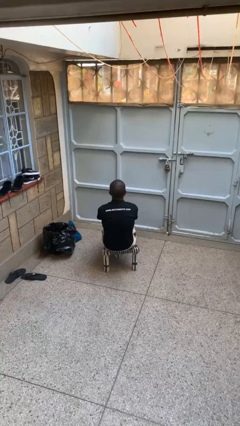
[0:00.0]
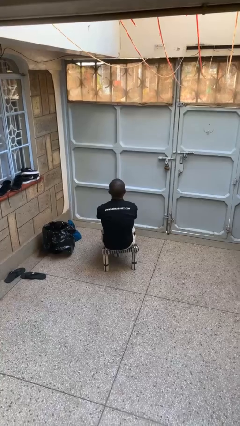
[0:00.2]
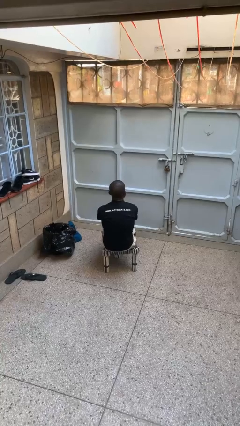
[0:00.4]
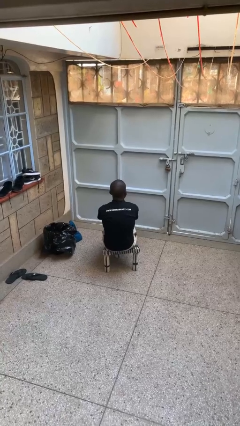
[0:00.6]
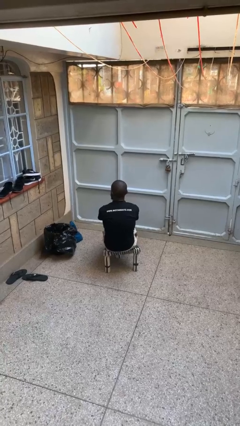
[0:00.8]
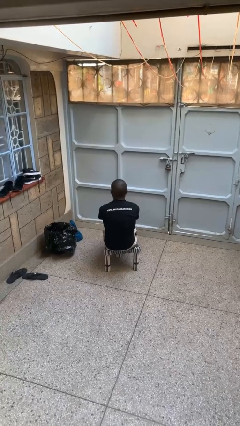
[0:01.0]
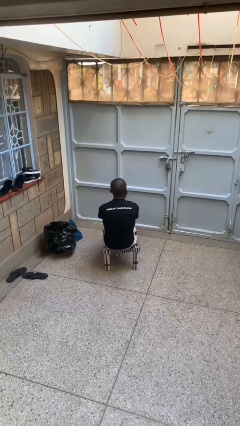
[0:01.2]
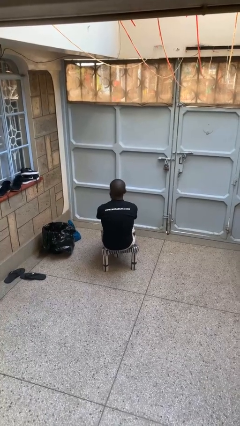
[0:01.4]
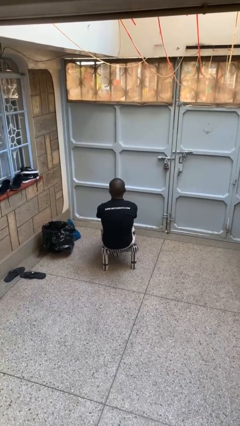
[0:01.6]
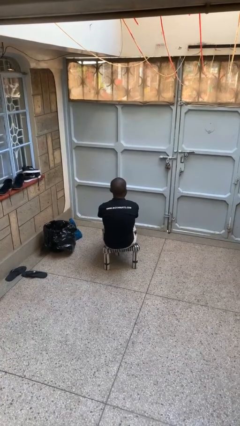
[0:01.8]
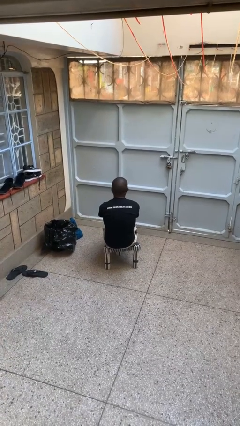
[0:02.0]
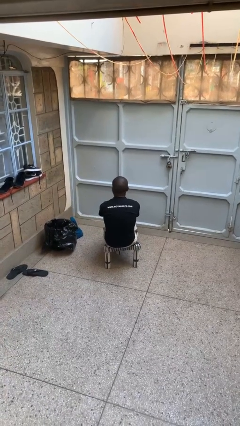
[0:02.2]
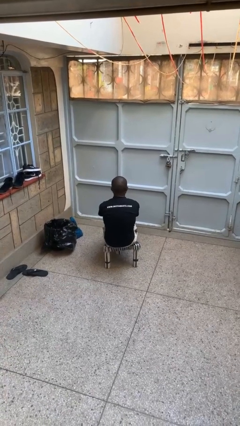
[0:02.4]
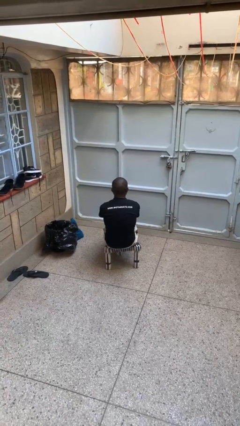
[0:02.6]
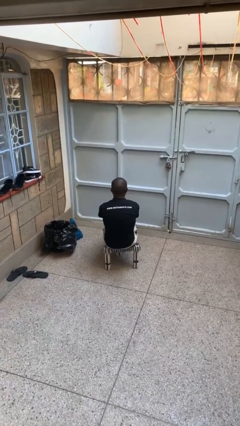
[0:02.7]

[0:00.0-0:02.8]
person shakes head

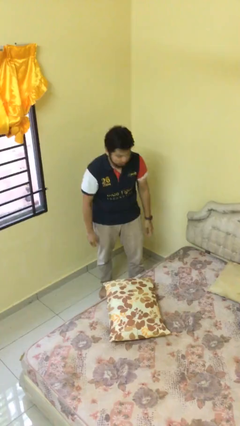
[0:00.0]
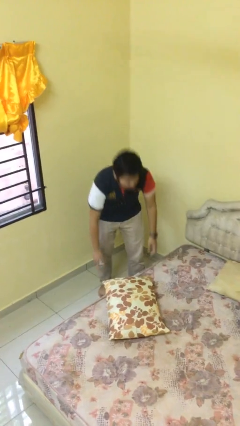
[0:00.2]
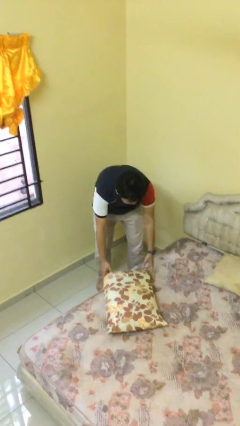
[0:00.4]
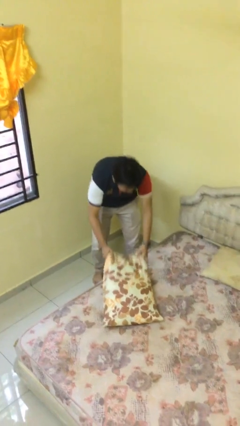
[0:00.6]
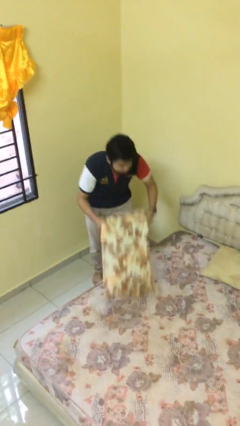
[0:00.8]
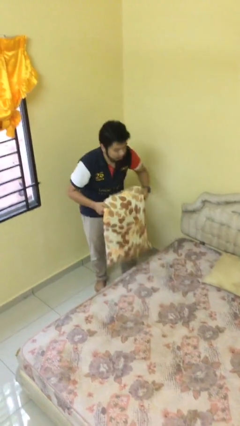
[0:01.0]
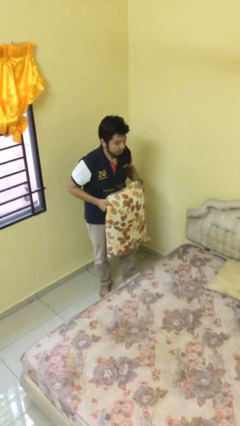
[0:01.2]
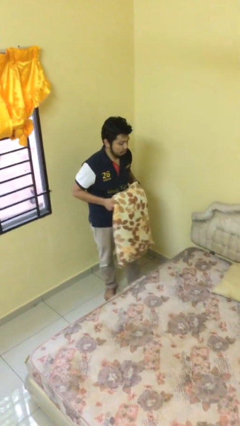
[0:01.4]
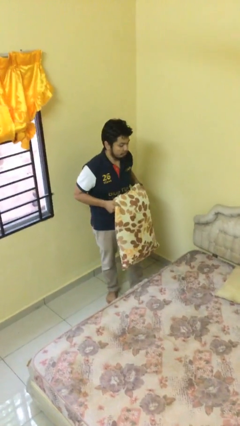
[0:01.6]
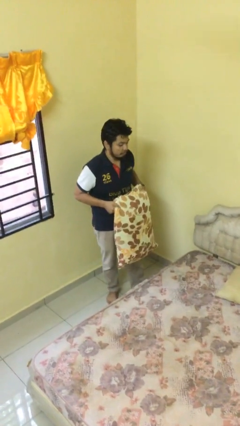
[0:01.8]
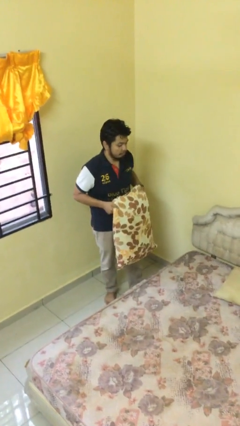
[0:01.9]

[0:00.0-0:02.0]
person picks up object from bed

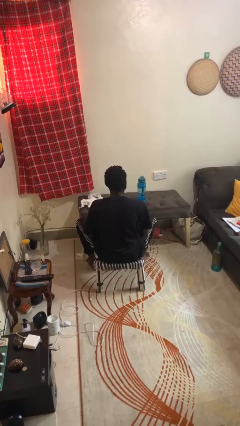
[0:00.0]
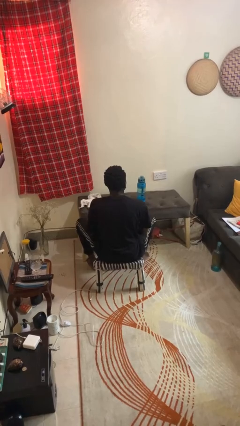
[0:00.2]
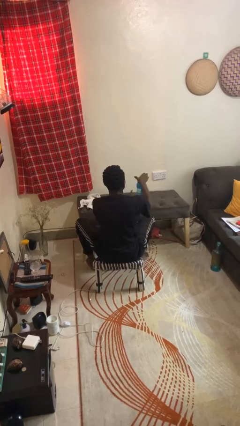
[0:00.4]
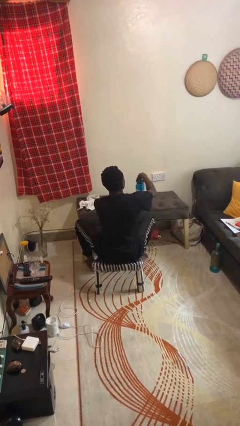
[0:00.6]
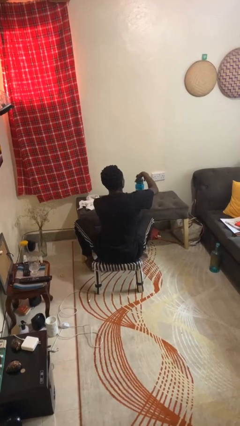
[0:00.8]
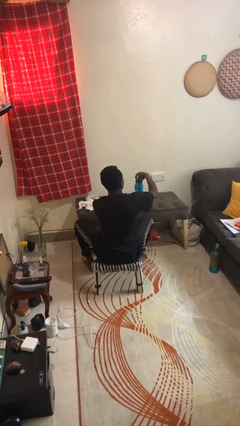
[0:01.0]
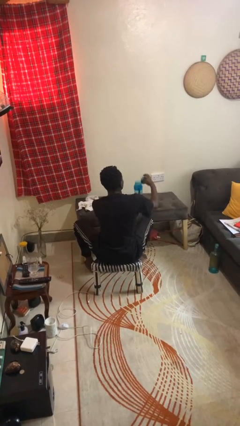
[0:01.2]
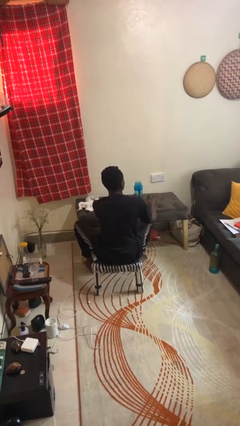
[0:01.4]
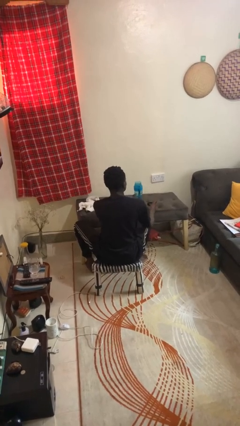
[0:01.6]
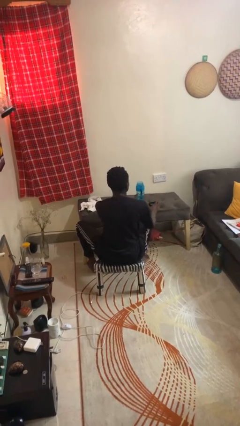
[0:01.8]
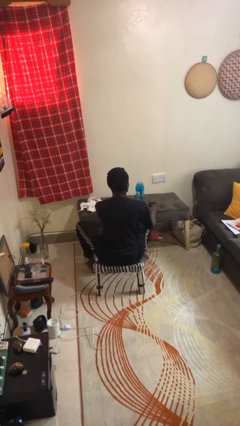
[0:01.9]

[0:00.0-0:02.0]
person opens jar

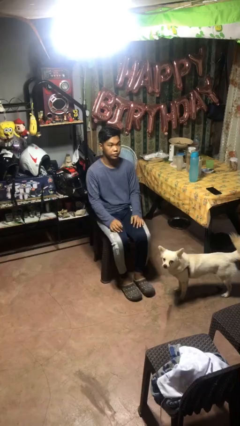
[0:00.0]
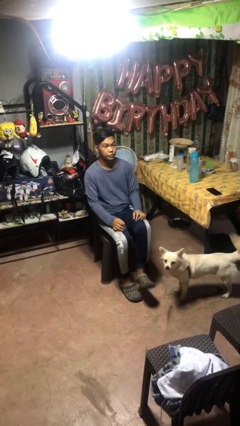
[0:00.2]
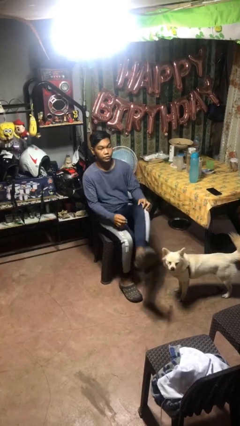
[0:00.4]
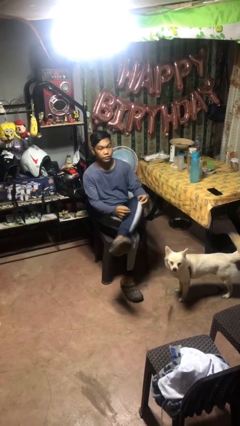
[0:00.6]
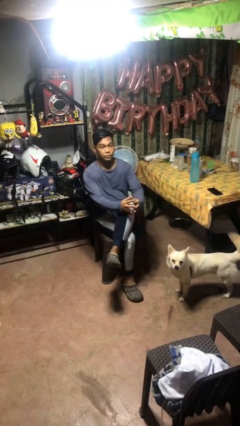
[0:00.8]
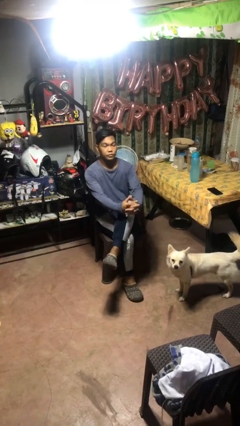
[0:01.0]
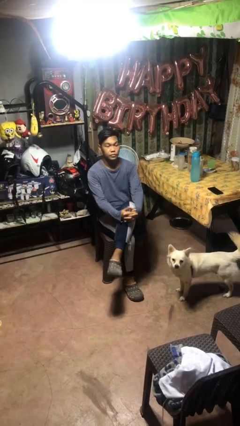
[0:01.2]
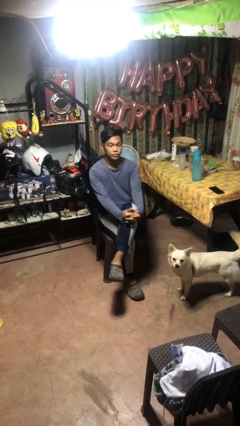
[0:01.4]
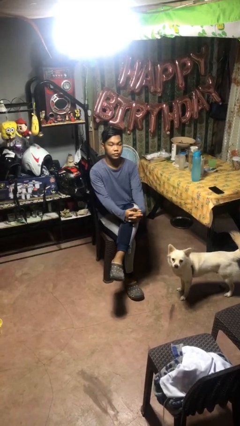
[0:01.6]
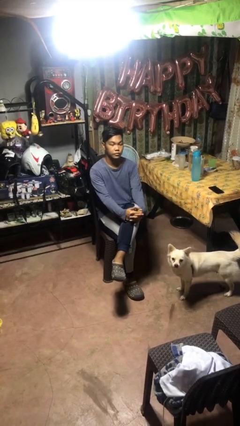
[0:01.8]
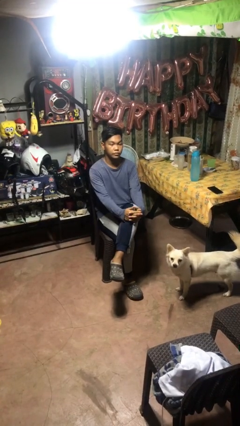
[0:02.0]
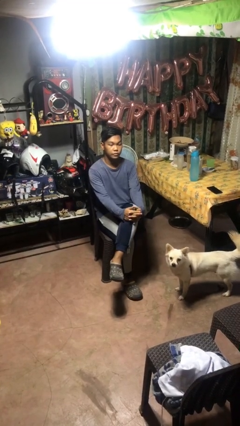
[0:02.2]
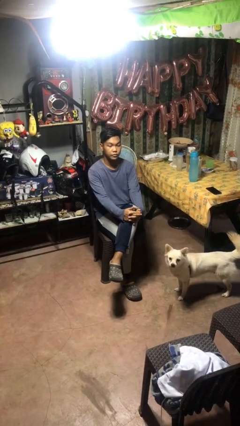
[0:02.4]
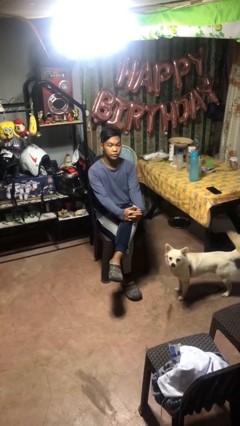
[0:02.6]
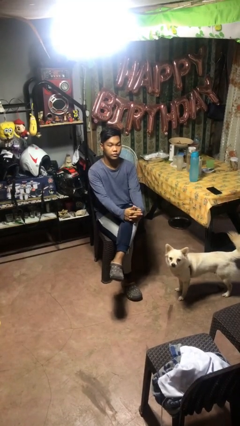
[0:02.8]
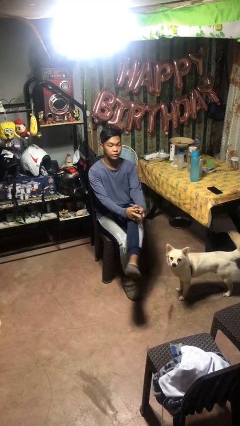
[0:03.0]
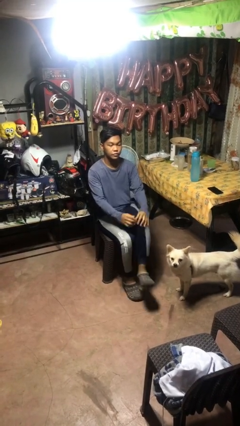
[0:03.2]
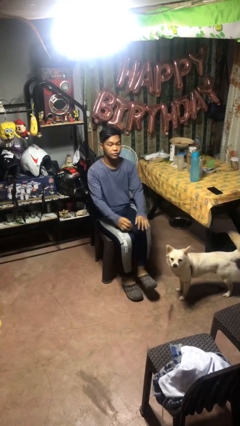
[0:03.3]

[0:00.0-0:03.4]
person crosses legs

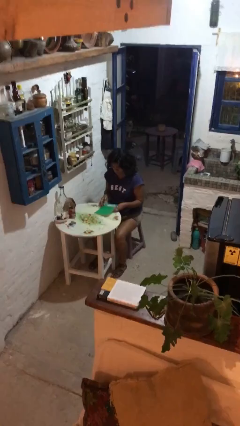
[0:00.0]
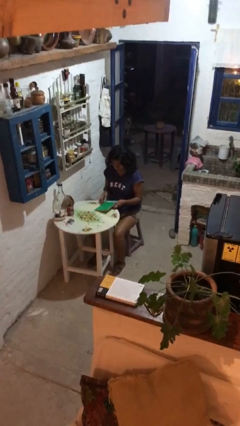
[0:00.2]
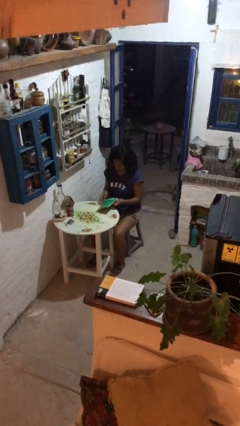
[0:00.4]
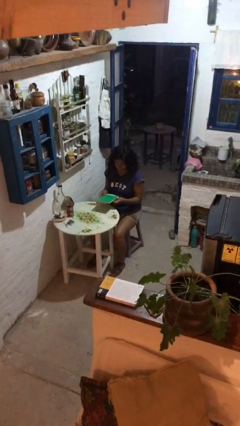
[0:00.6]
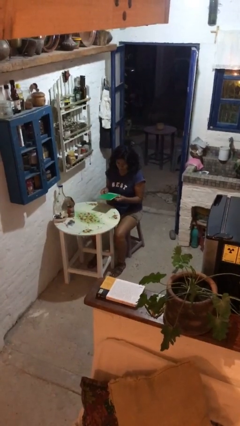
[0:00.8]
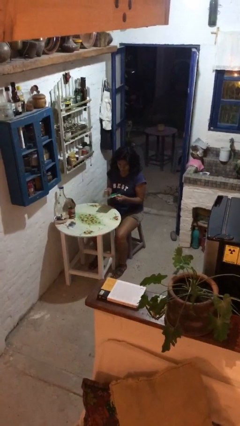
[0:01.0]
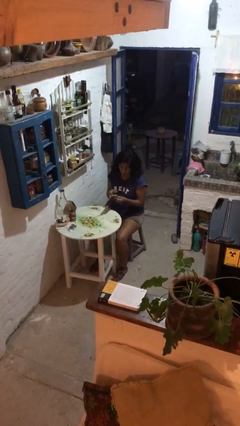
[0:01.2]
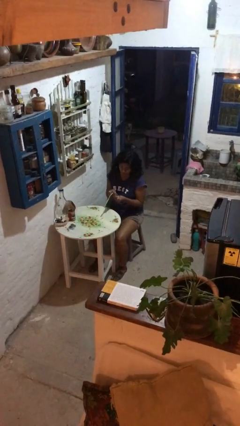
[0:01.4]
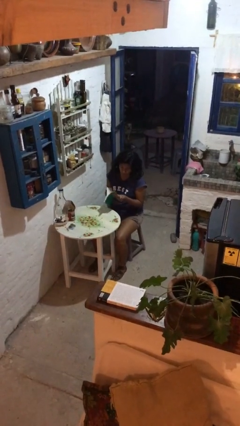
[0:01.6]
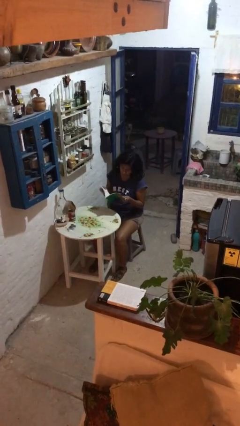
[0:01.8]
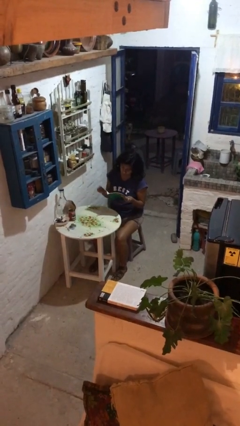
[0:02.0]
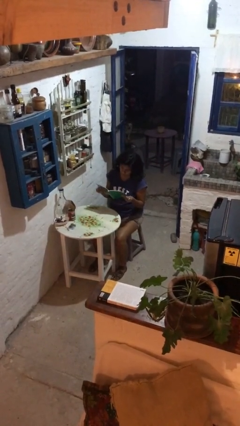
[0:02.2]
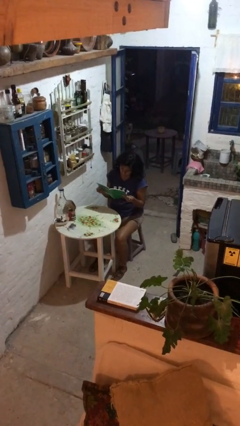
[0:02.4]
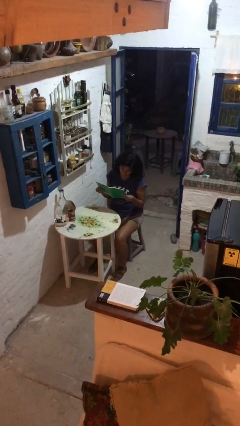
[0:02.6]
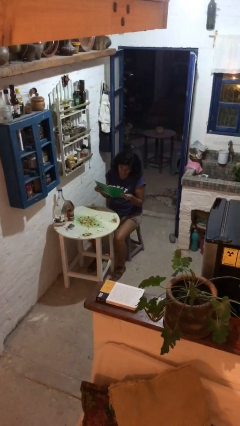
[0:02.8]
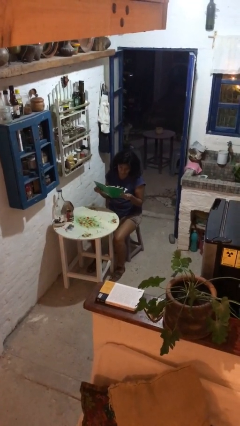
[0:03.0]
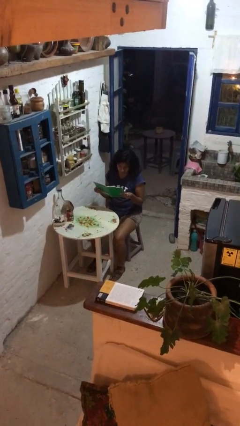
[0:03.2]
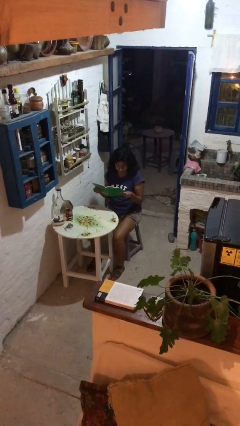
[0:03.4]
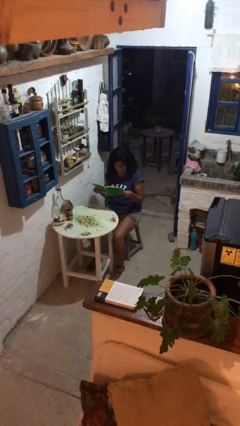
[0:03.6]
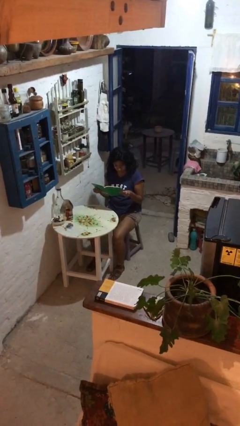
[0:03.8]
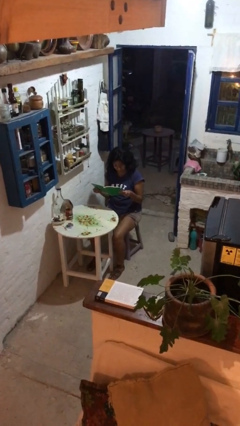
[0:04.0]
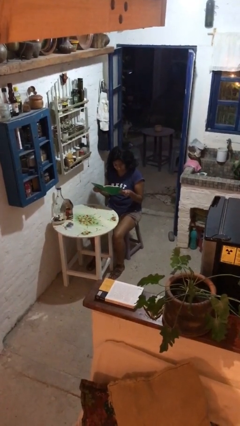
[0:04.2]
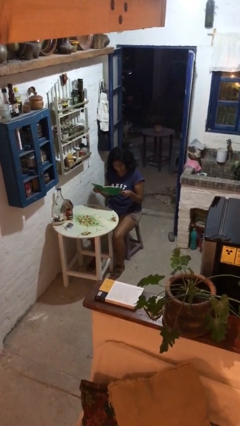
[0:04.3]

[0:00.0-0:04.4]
person reads document

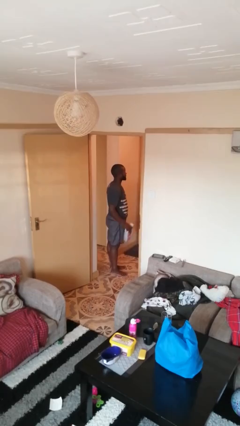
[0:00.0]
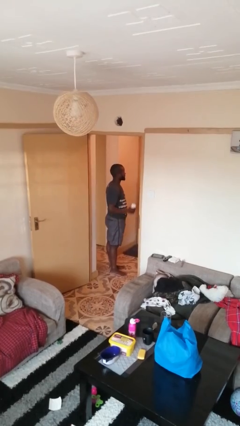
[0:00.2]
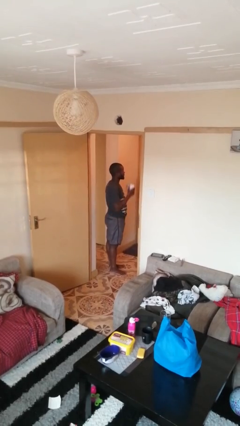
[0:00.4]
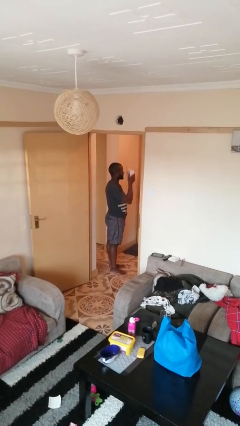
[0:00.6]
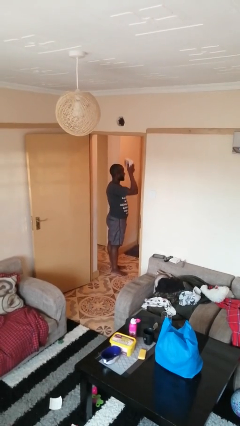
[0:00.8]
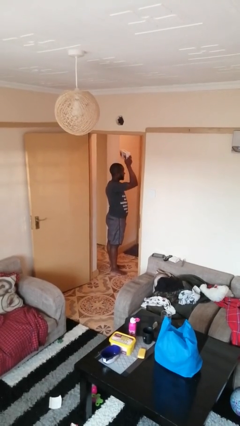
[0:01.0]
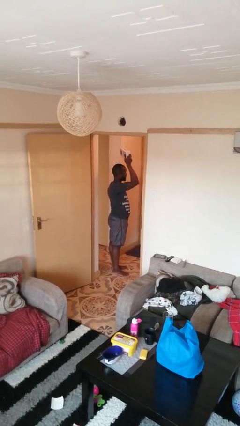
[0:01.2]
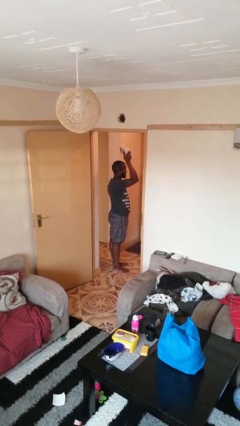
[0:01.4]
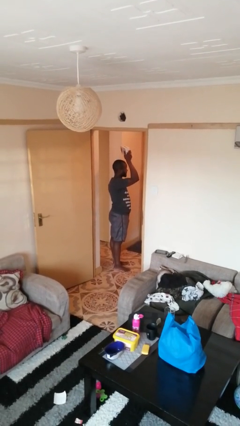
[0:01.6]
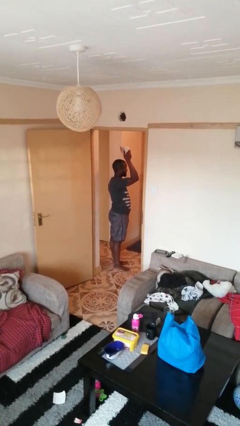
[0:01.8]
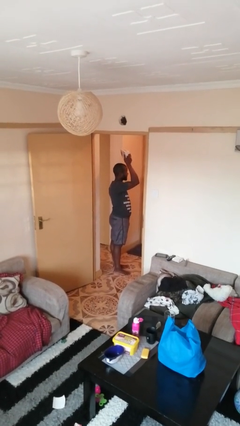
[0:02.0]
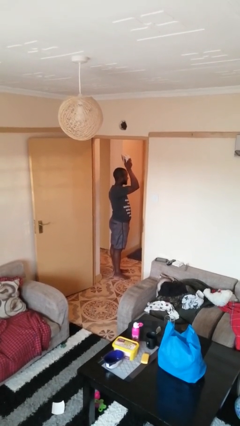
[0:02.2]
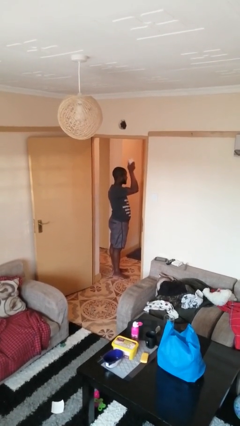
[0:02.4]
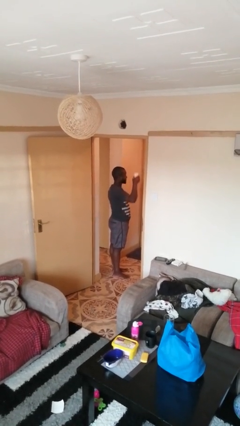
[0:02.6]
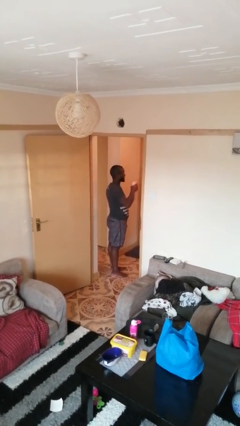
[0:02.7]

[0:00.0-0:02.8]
person holds object above head

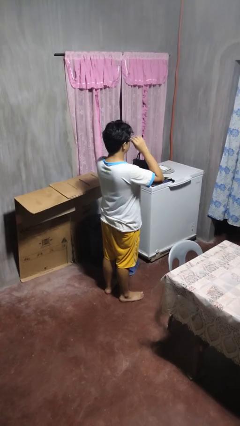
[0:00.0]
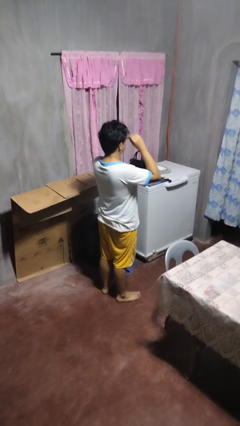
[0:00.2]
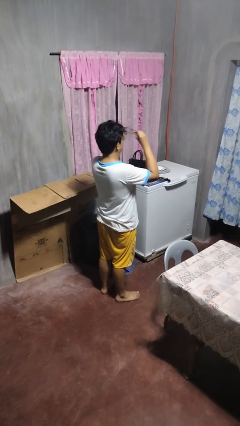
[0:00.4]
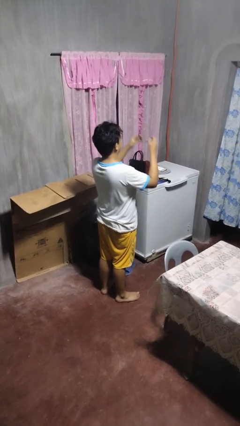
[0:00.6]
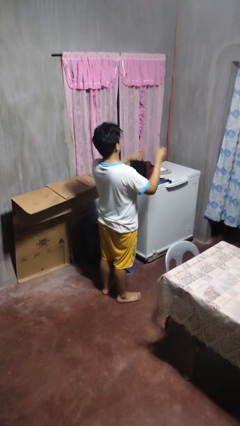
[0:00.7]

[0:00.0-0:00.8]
person takes off glasses
